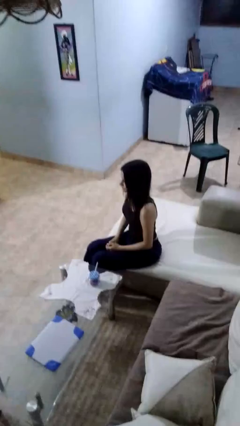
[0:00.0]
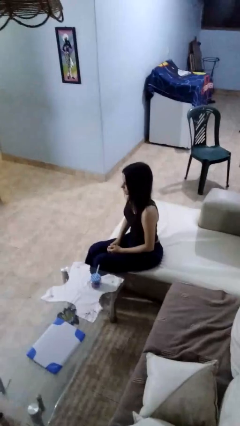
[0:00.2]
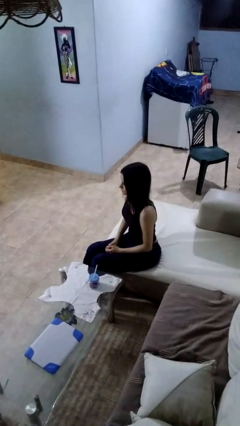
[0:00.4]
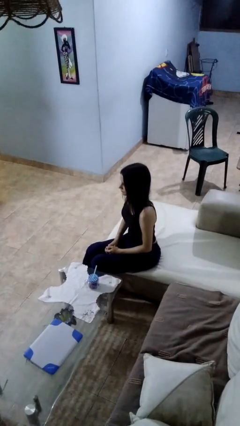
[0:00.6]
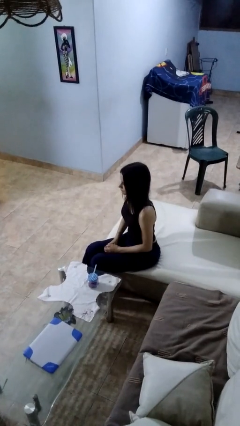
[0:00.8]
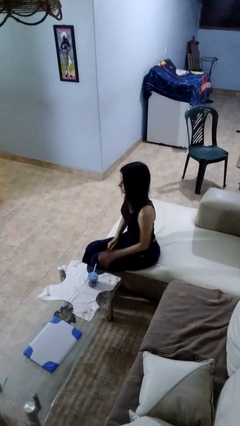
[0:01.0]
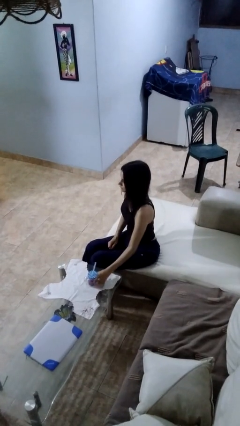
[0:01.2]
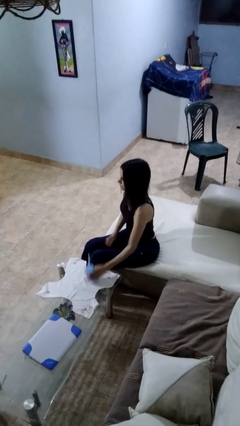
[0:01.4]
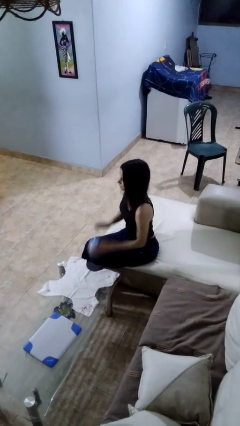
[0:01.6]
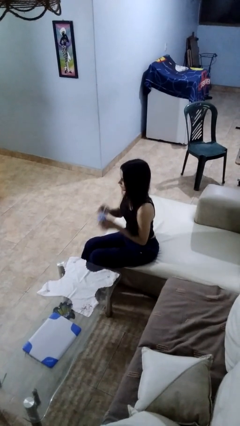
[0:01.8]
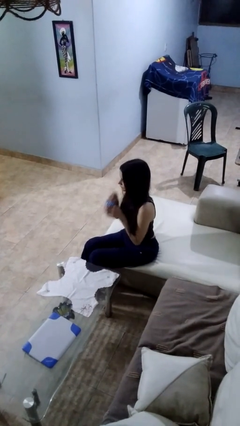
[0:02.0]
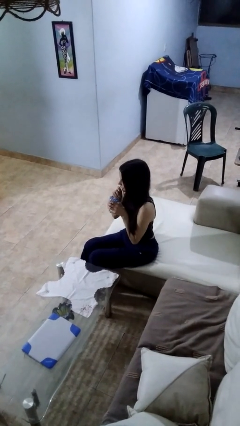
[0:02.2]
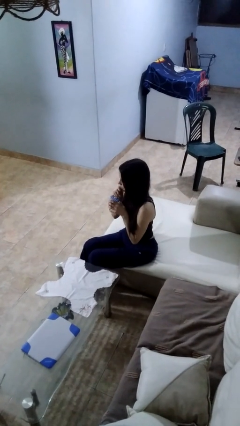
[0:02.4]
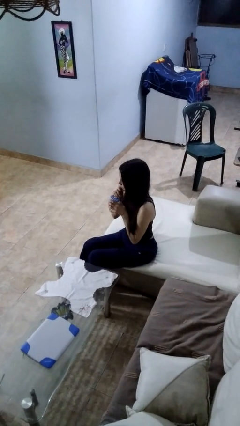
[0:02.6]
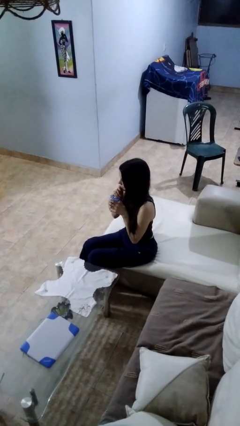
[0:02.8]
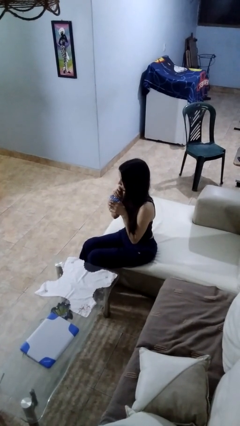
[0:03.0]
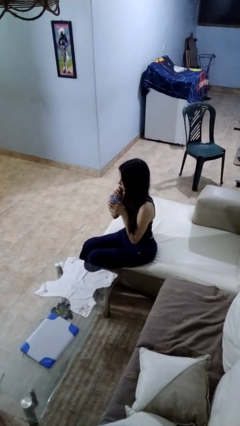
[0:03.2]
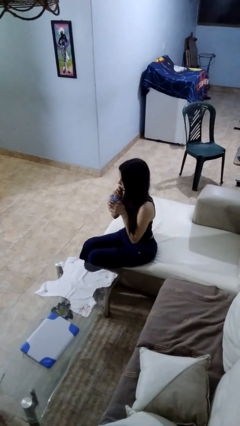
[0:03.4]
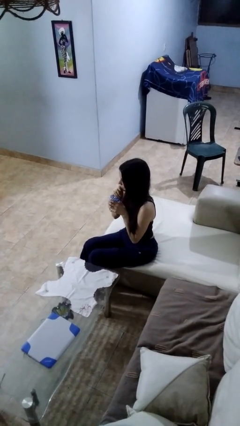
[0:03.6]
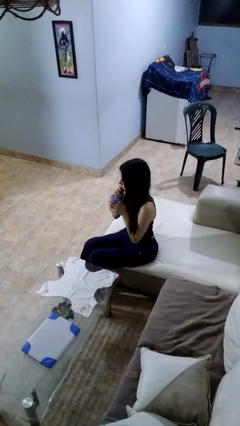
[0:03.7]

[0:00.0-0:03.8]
person drinks from straw

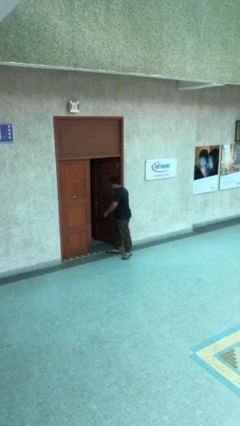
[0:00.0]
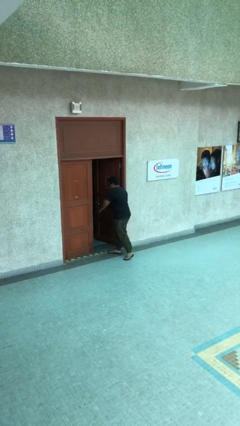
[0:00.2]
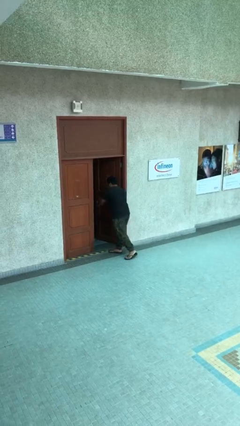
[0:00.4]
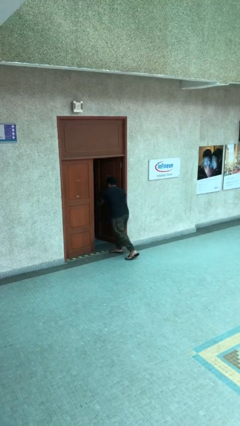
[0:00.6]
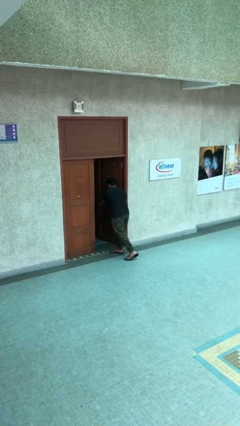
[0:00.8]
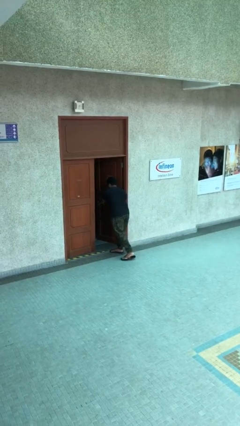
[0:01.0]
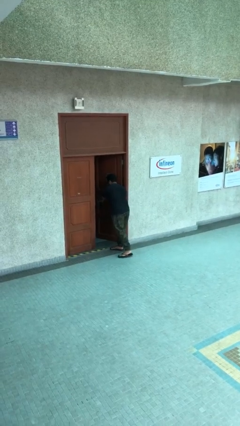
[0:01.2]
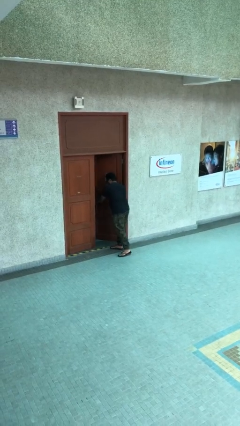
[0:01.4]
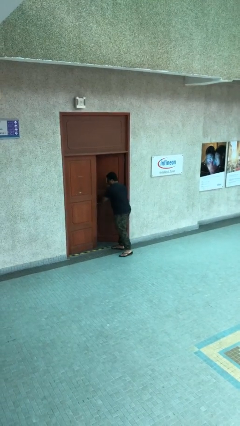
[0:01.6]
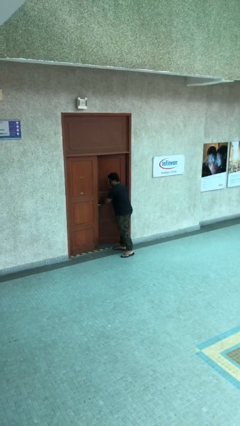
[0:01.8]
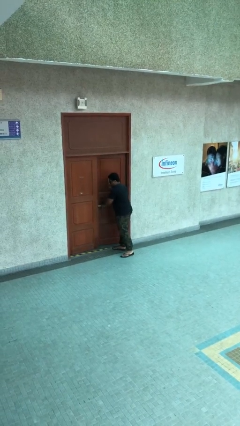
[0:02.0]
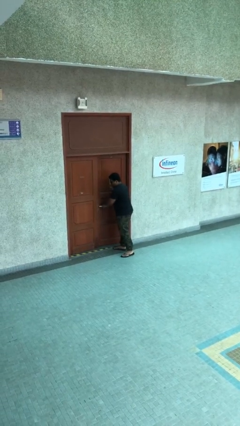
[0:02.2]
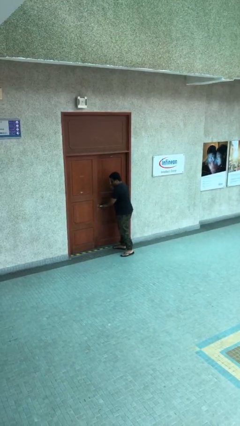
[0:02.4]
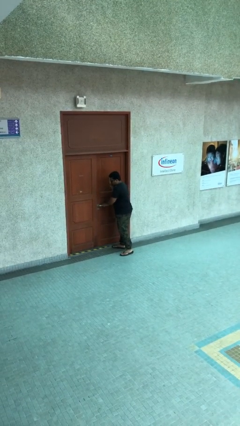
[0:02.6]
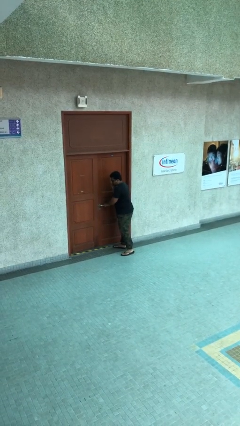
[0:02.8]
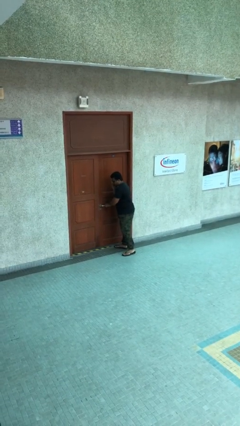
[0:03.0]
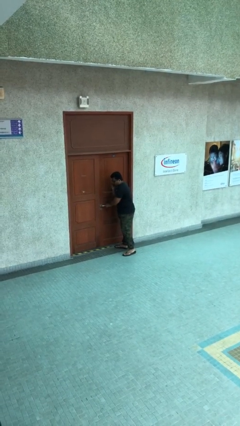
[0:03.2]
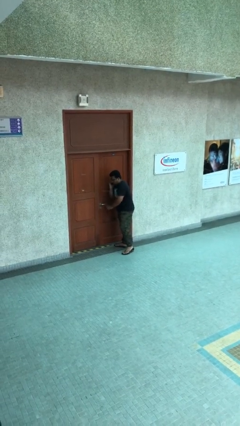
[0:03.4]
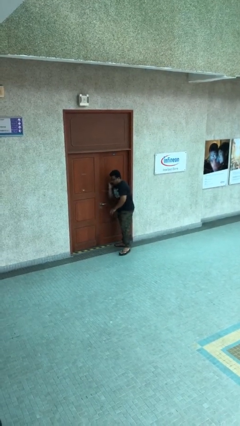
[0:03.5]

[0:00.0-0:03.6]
person closes facility door

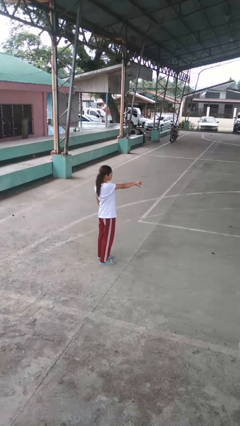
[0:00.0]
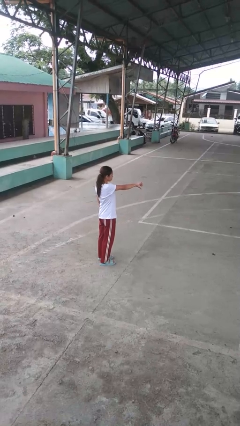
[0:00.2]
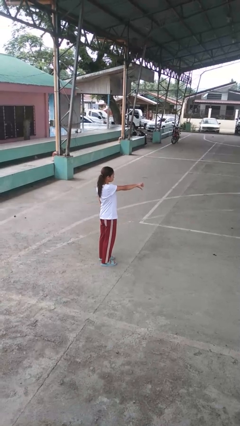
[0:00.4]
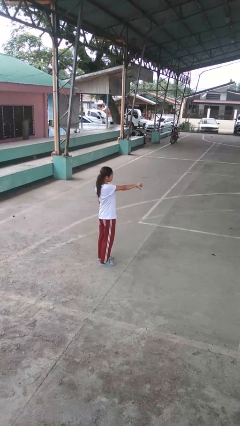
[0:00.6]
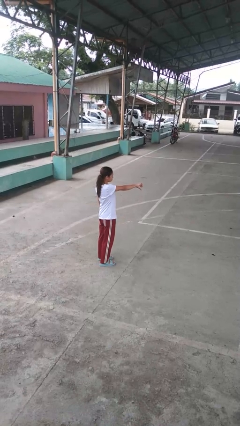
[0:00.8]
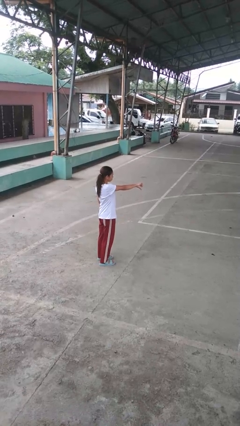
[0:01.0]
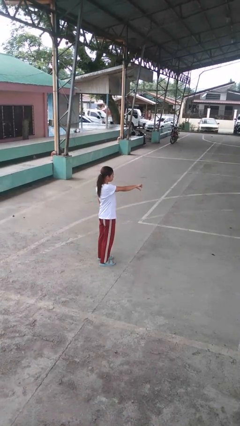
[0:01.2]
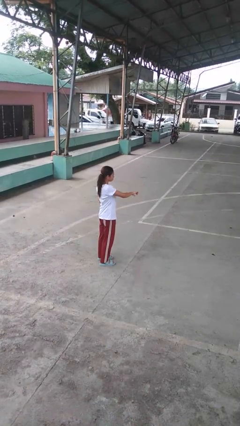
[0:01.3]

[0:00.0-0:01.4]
person gestures thumbs down

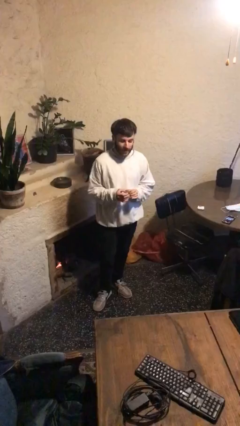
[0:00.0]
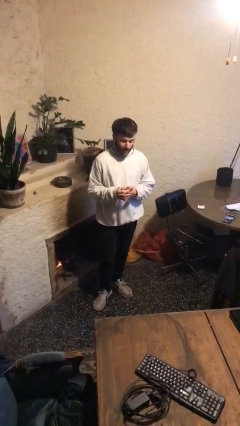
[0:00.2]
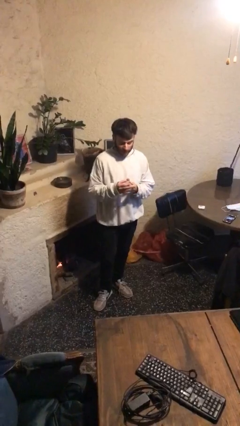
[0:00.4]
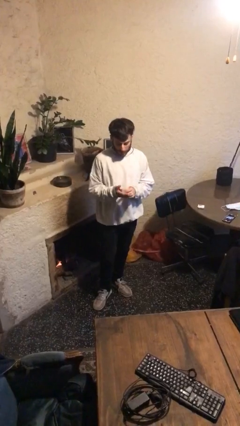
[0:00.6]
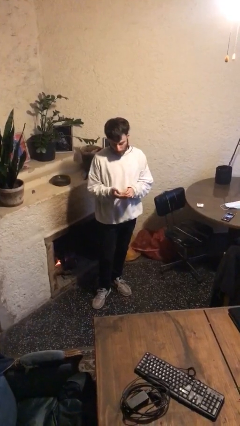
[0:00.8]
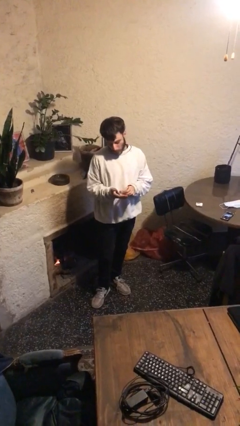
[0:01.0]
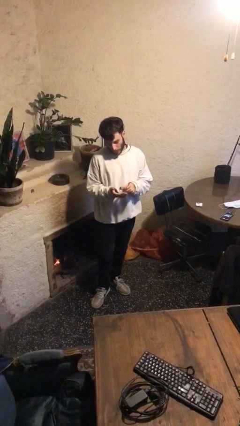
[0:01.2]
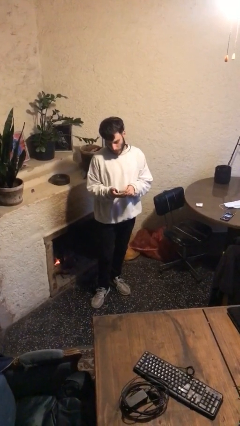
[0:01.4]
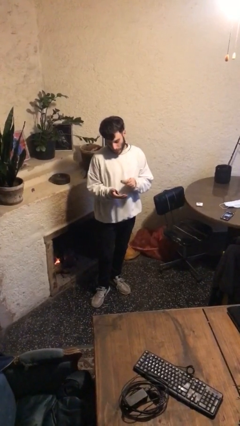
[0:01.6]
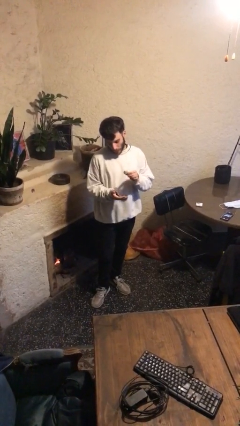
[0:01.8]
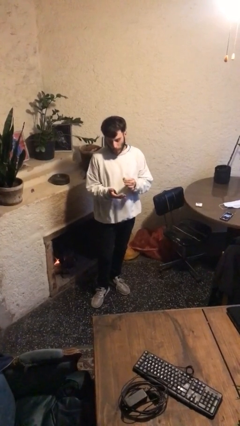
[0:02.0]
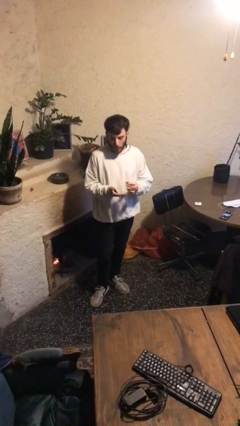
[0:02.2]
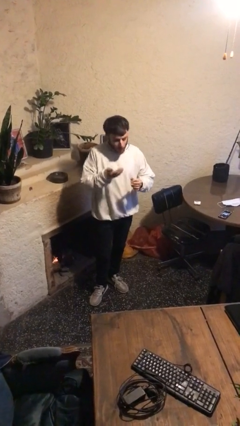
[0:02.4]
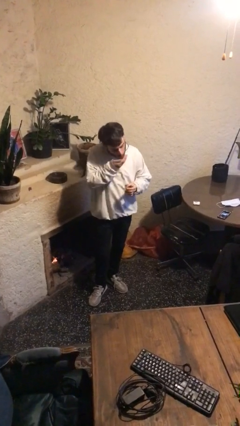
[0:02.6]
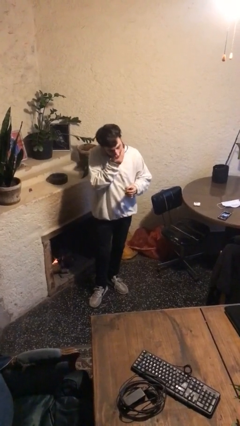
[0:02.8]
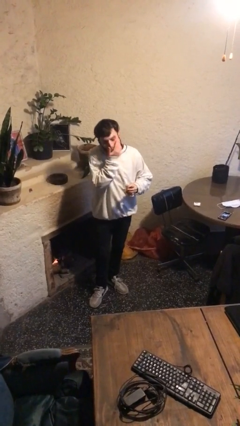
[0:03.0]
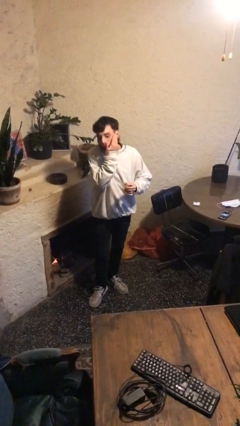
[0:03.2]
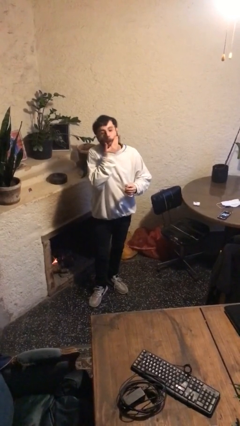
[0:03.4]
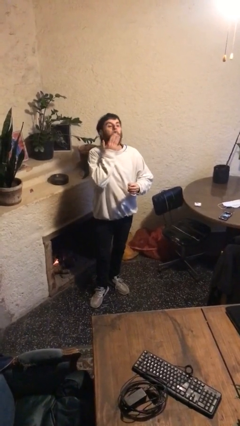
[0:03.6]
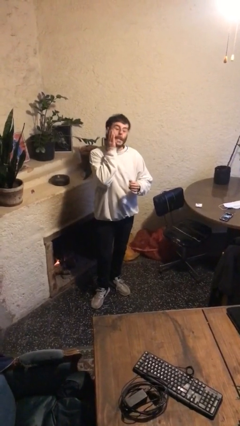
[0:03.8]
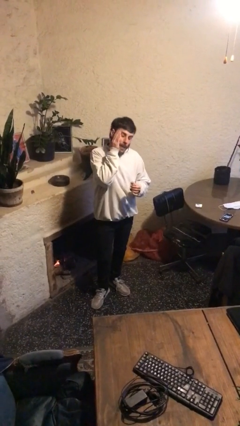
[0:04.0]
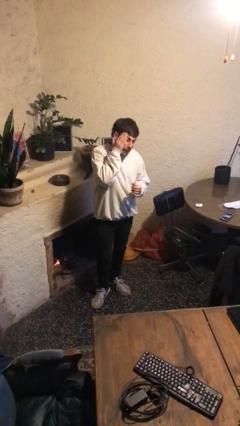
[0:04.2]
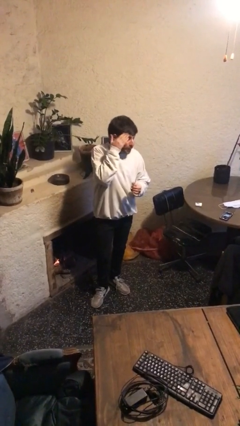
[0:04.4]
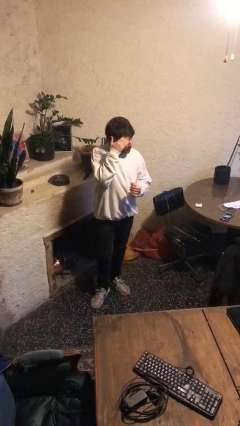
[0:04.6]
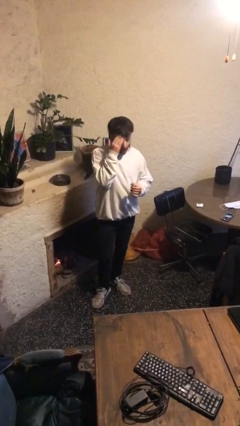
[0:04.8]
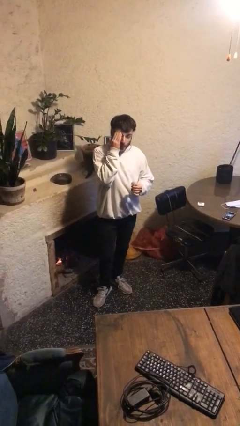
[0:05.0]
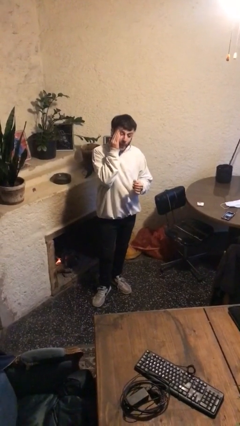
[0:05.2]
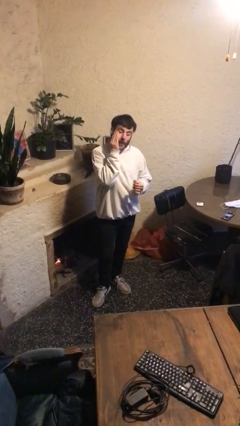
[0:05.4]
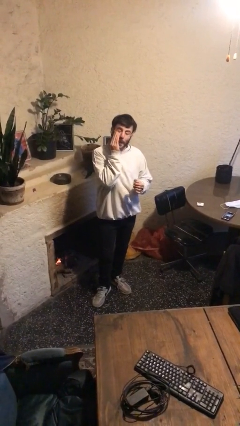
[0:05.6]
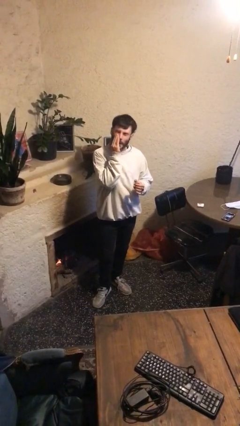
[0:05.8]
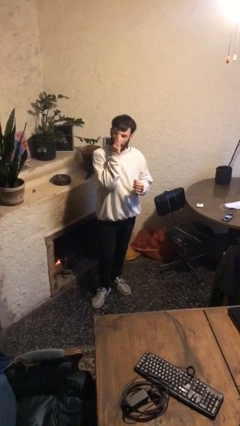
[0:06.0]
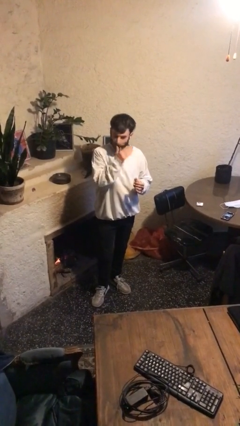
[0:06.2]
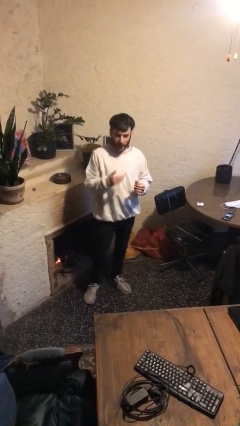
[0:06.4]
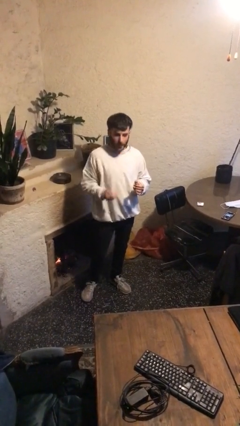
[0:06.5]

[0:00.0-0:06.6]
person applies facial moisturizer

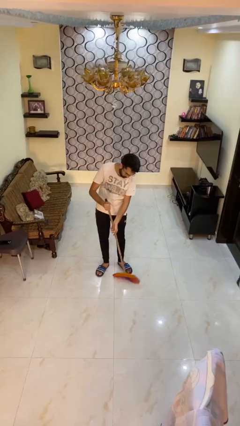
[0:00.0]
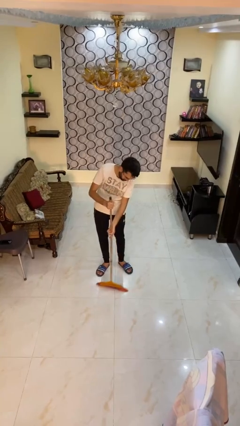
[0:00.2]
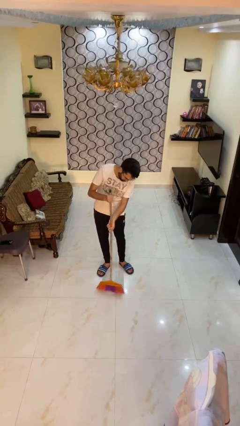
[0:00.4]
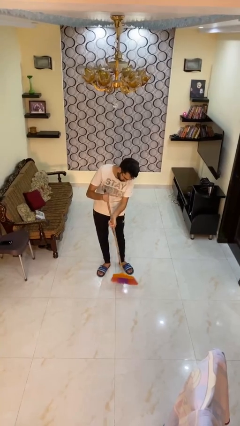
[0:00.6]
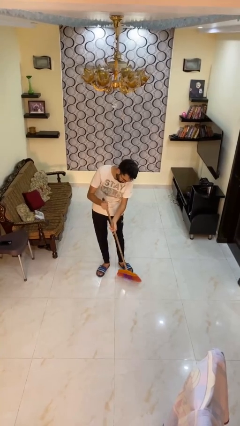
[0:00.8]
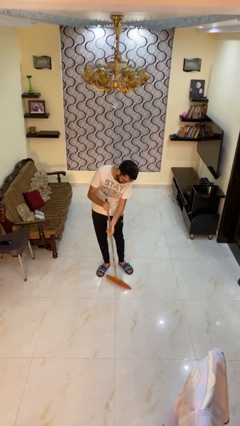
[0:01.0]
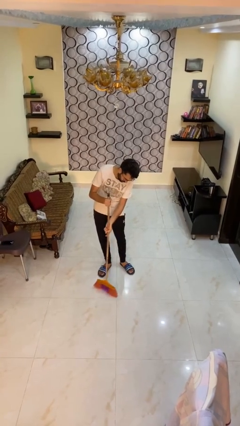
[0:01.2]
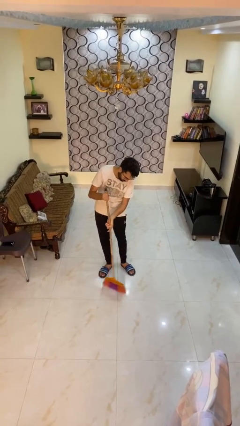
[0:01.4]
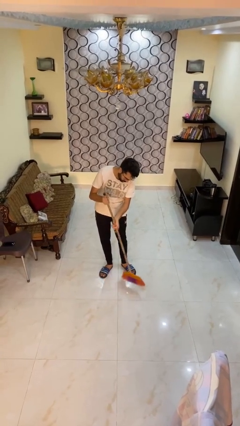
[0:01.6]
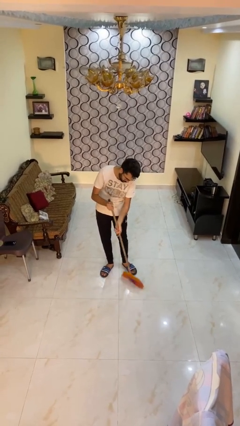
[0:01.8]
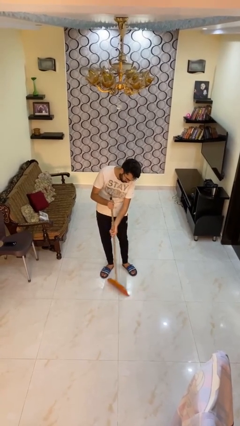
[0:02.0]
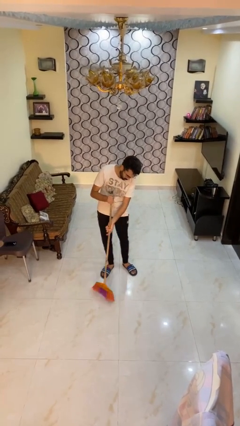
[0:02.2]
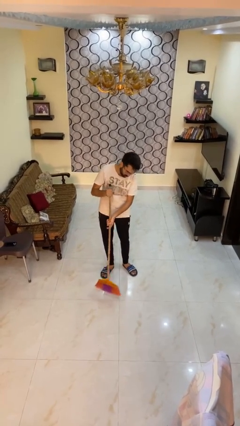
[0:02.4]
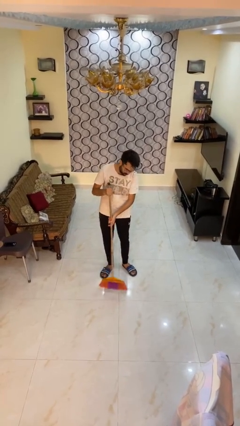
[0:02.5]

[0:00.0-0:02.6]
person mops
